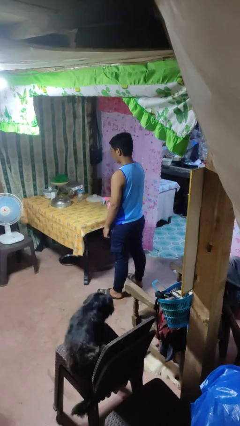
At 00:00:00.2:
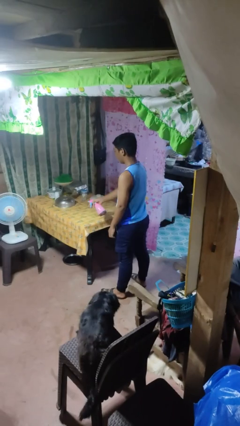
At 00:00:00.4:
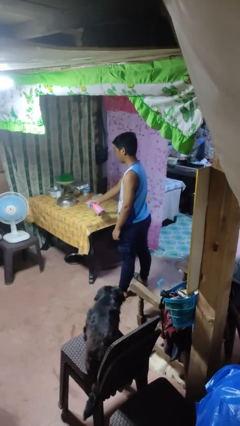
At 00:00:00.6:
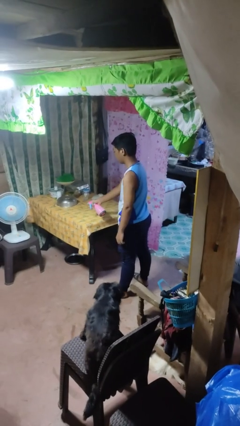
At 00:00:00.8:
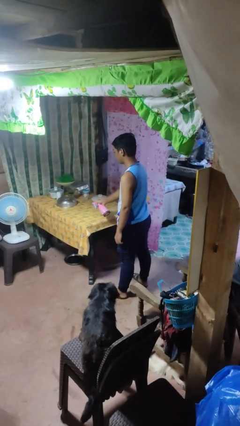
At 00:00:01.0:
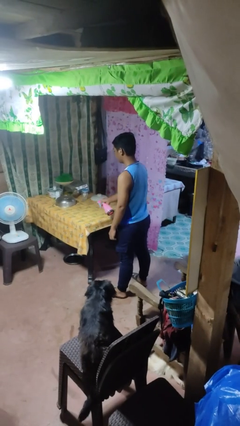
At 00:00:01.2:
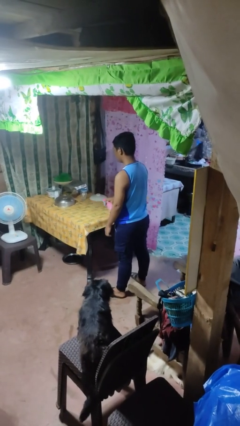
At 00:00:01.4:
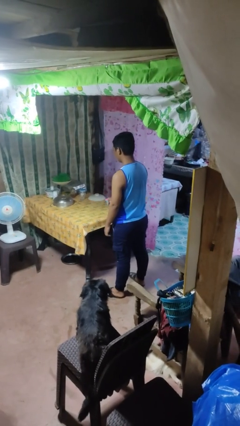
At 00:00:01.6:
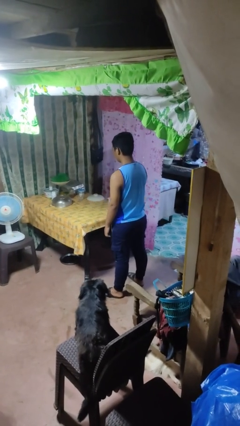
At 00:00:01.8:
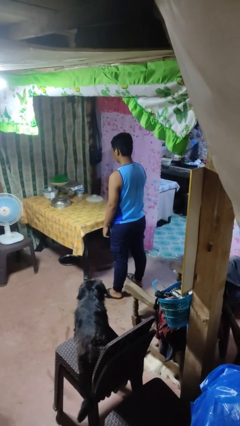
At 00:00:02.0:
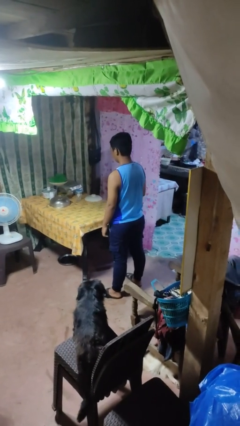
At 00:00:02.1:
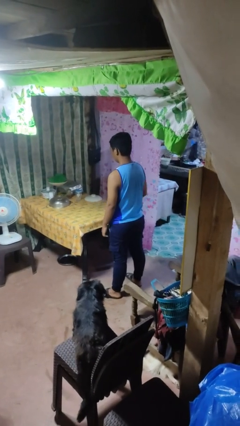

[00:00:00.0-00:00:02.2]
person sprays from bottle

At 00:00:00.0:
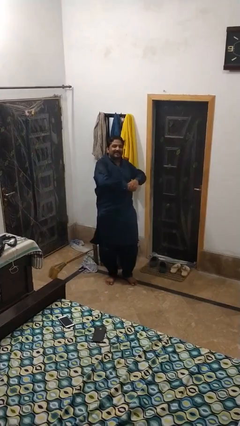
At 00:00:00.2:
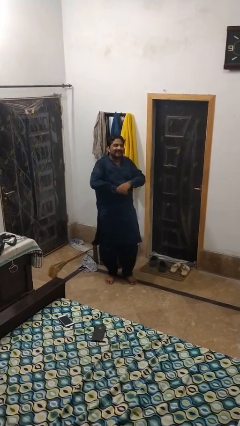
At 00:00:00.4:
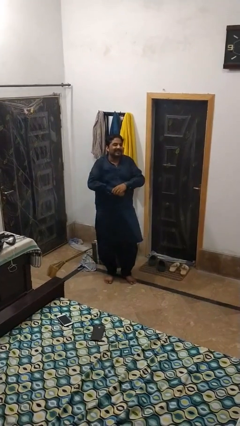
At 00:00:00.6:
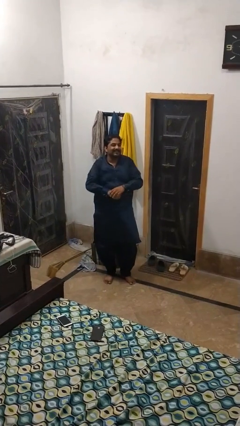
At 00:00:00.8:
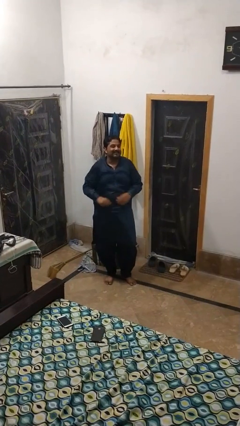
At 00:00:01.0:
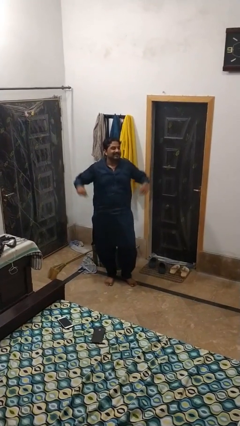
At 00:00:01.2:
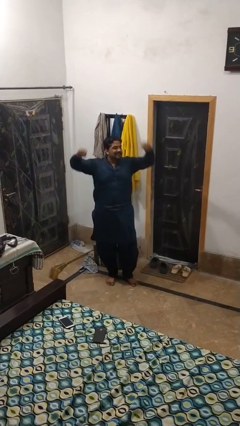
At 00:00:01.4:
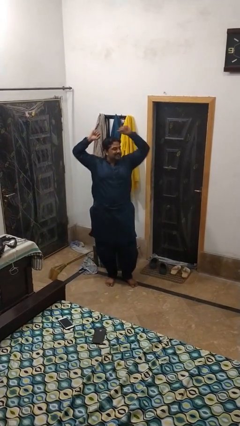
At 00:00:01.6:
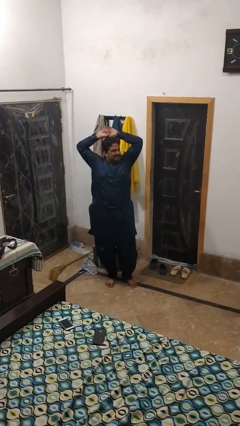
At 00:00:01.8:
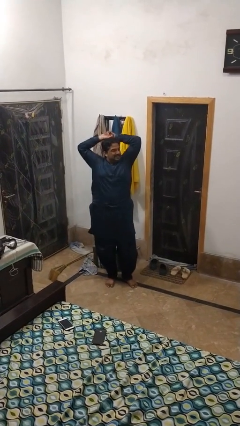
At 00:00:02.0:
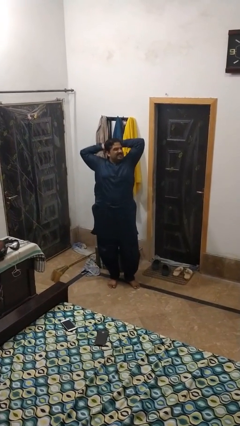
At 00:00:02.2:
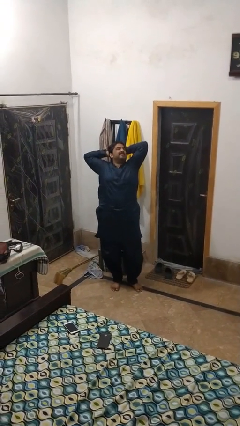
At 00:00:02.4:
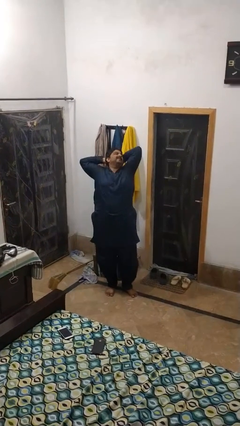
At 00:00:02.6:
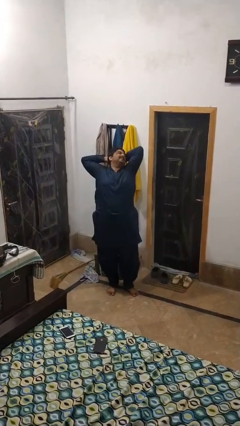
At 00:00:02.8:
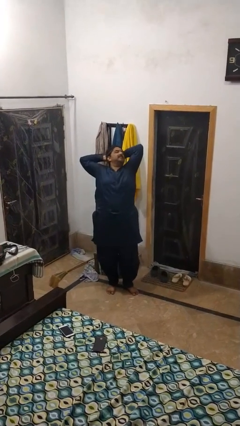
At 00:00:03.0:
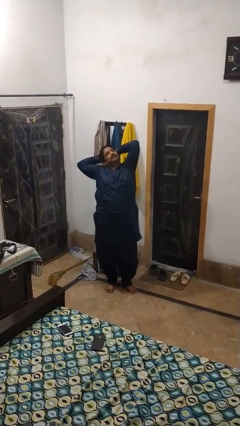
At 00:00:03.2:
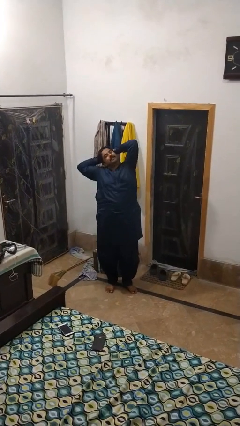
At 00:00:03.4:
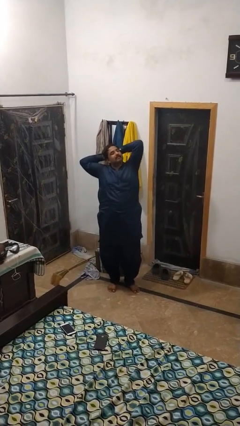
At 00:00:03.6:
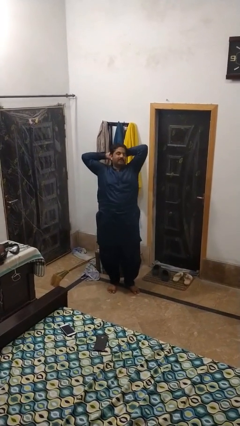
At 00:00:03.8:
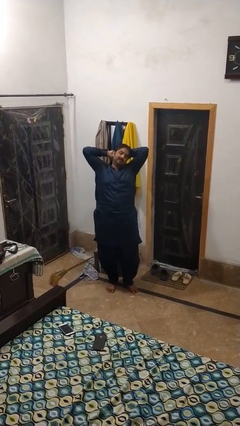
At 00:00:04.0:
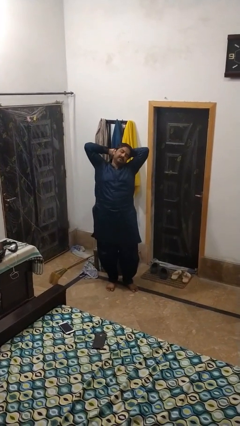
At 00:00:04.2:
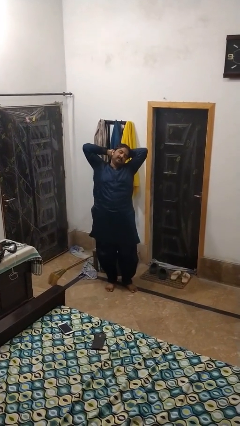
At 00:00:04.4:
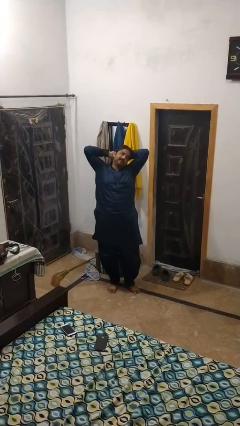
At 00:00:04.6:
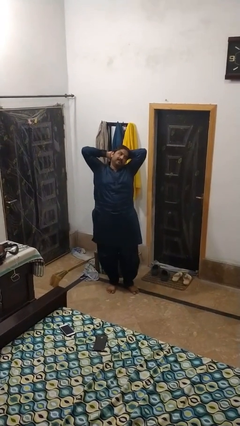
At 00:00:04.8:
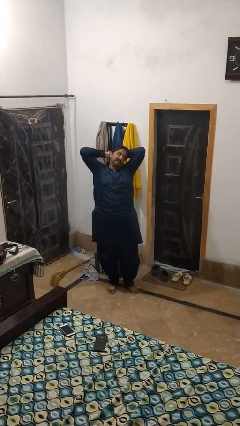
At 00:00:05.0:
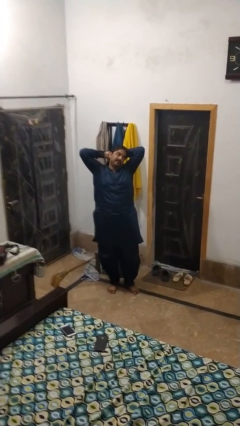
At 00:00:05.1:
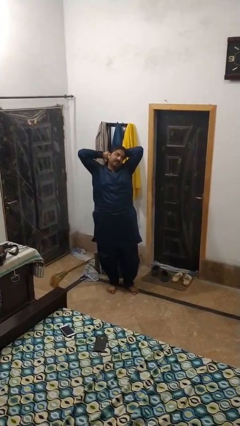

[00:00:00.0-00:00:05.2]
person stretches arms over head

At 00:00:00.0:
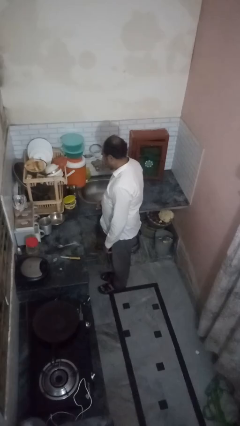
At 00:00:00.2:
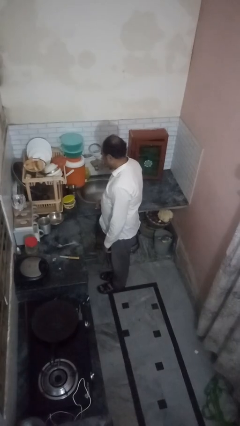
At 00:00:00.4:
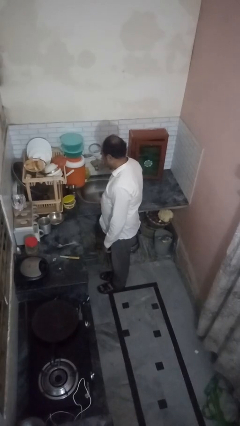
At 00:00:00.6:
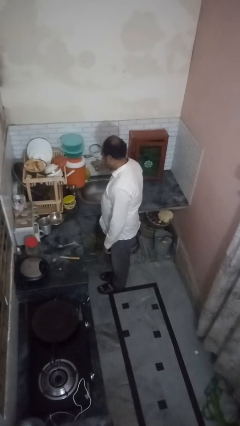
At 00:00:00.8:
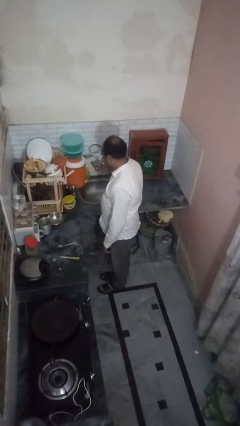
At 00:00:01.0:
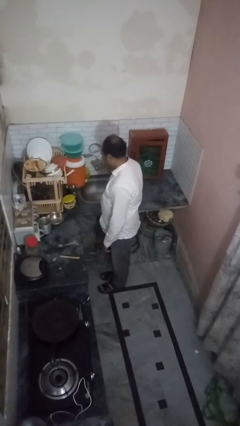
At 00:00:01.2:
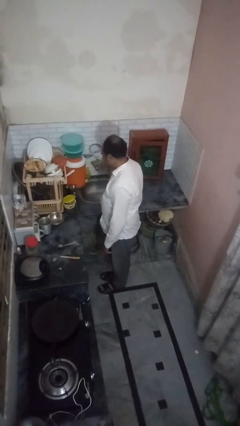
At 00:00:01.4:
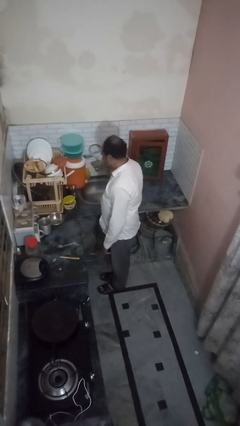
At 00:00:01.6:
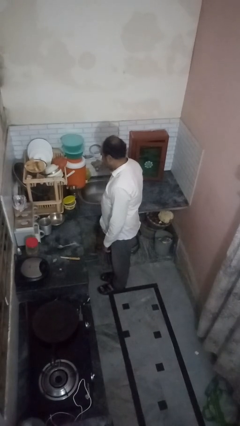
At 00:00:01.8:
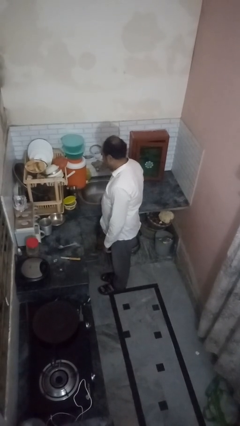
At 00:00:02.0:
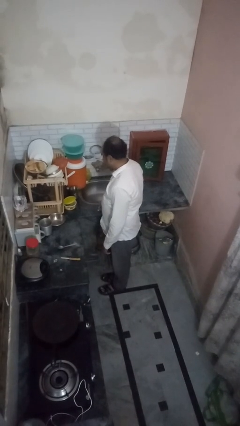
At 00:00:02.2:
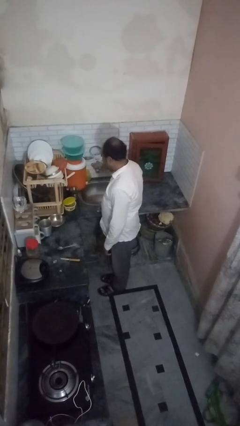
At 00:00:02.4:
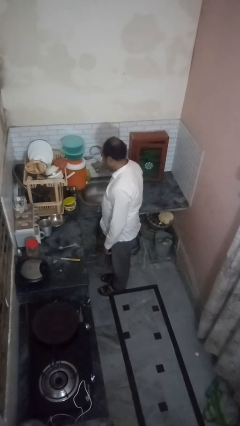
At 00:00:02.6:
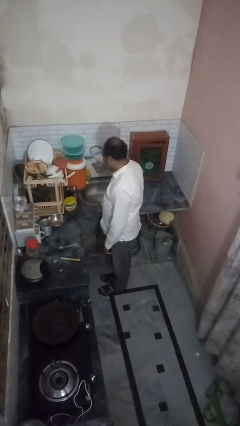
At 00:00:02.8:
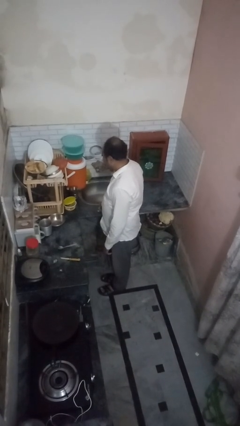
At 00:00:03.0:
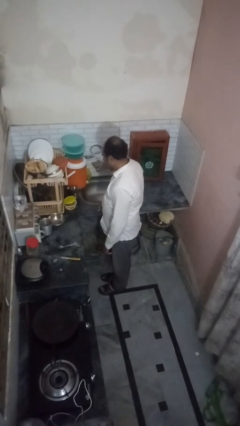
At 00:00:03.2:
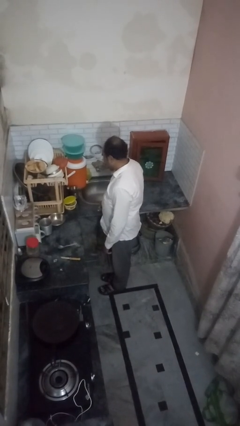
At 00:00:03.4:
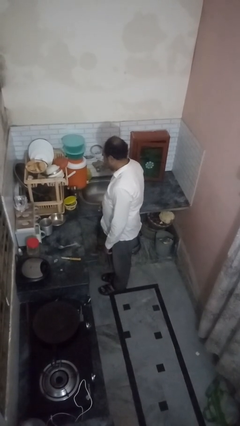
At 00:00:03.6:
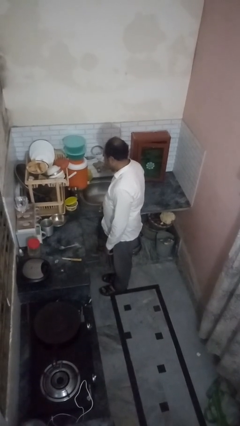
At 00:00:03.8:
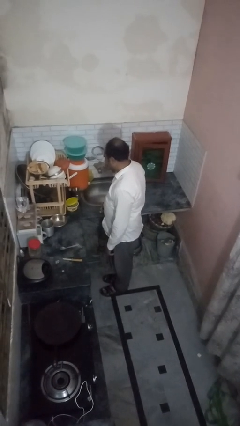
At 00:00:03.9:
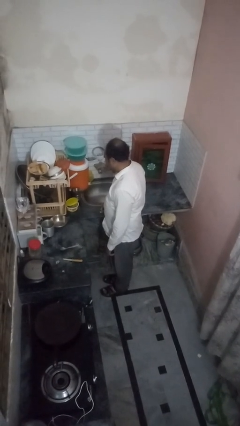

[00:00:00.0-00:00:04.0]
person turns off faucet

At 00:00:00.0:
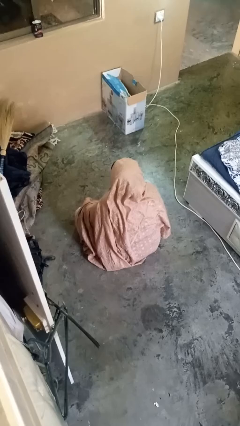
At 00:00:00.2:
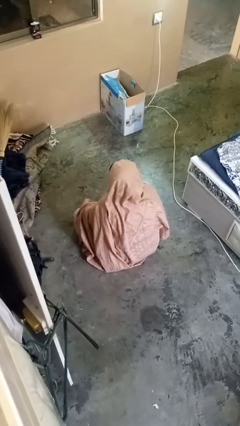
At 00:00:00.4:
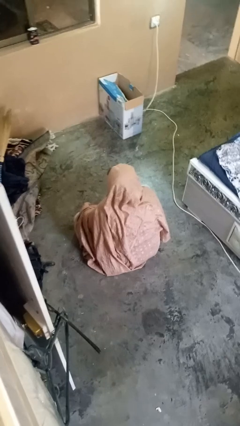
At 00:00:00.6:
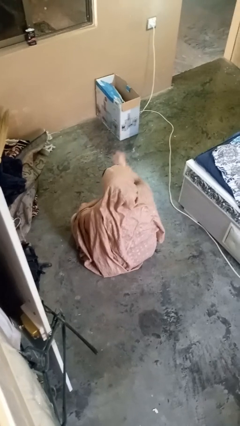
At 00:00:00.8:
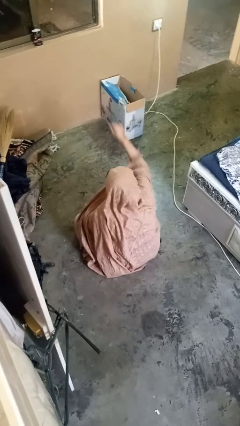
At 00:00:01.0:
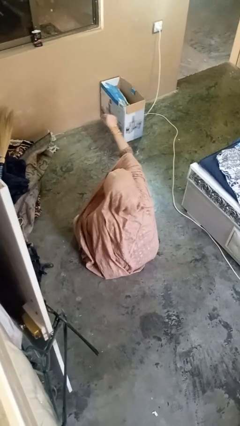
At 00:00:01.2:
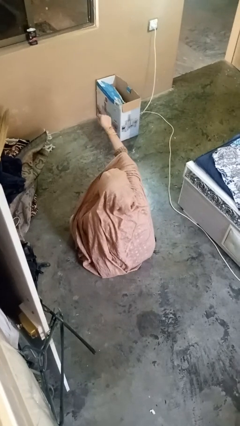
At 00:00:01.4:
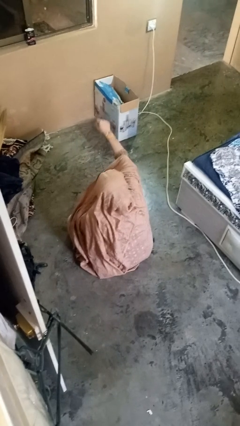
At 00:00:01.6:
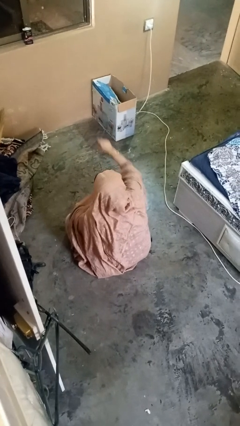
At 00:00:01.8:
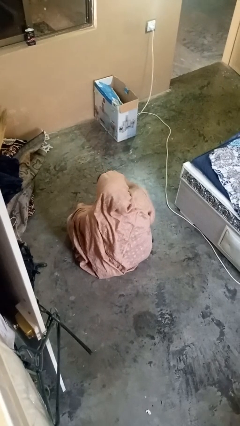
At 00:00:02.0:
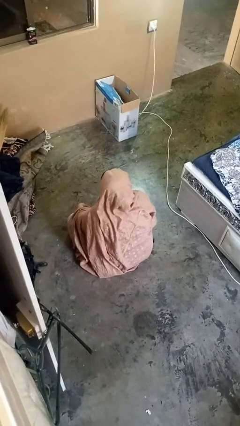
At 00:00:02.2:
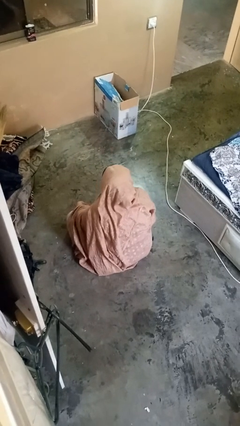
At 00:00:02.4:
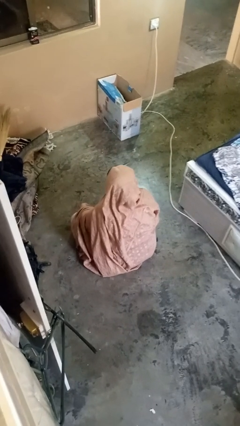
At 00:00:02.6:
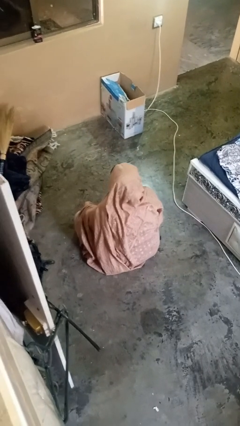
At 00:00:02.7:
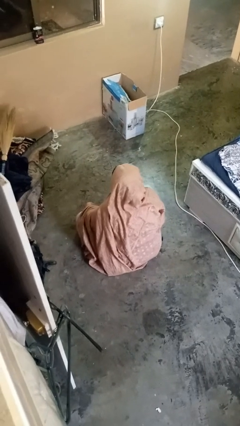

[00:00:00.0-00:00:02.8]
person punches

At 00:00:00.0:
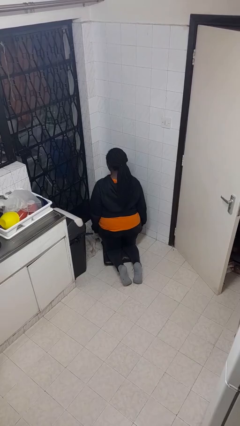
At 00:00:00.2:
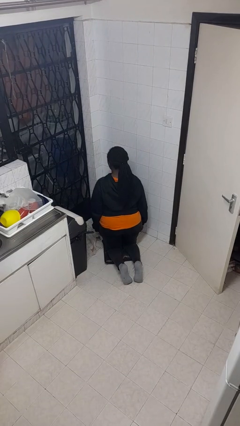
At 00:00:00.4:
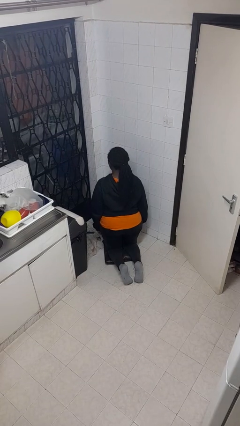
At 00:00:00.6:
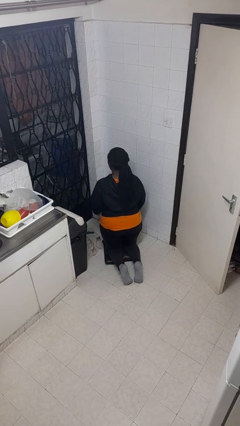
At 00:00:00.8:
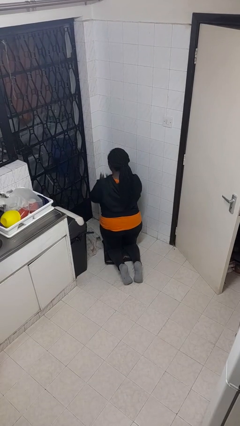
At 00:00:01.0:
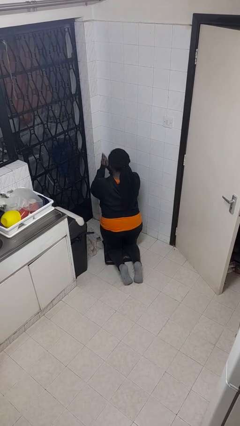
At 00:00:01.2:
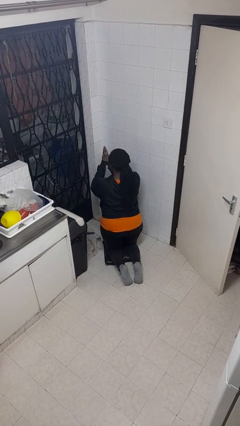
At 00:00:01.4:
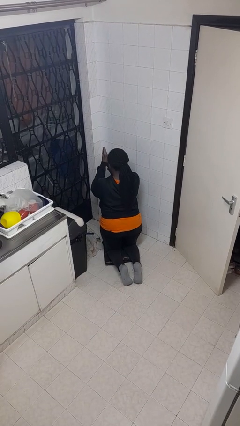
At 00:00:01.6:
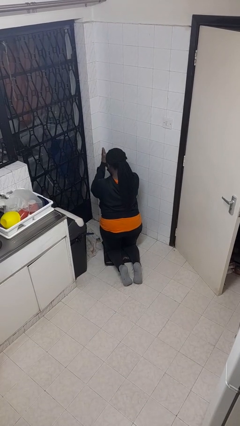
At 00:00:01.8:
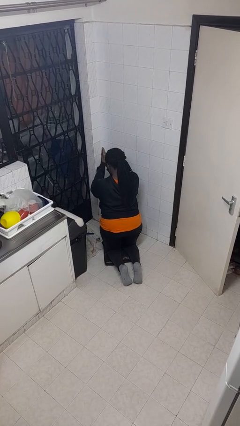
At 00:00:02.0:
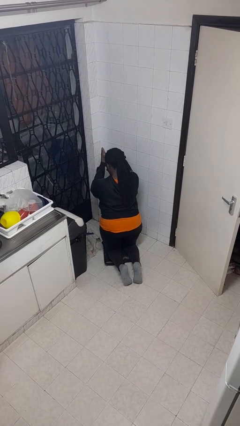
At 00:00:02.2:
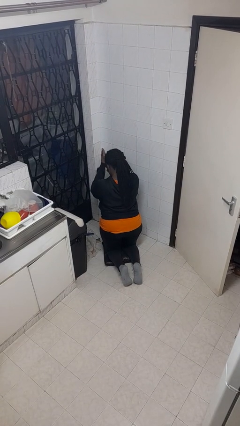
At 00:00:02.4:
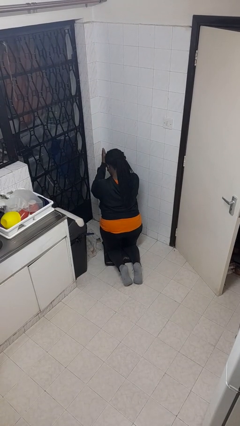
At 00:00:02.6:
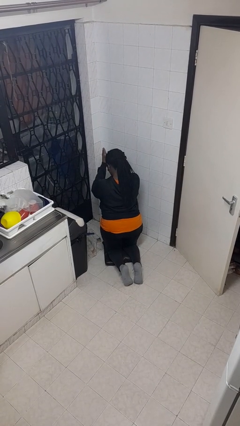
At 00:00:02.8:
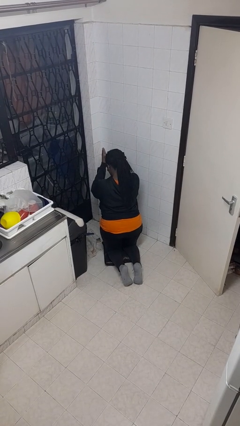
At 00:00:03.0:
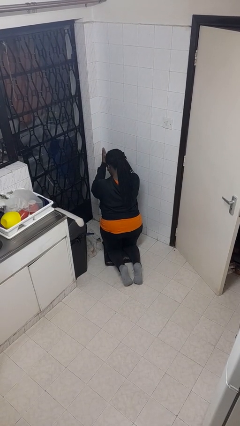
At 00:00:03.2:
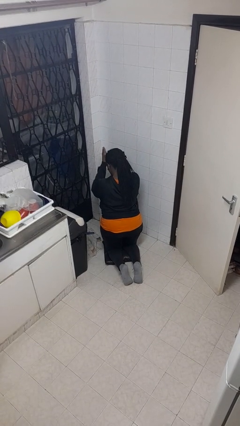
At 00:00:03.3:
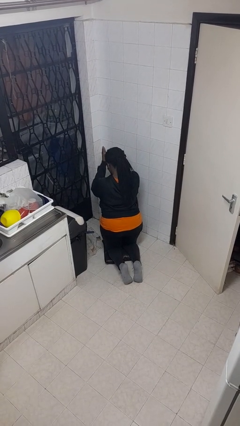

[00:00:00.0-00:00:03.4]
person prays
